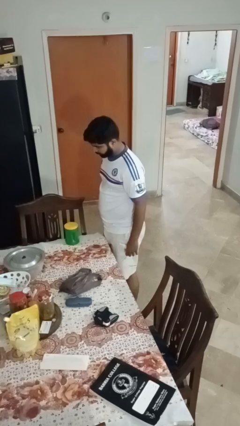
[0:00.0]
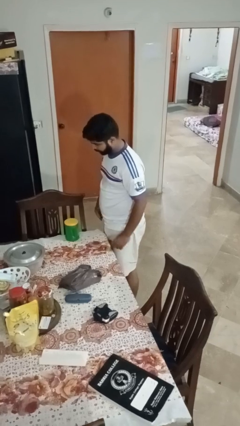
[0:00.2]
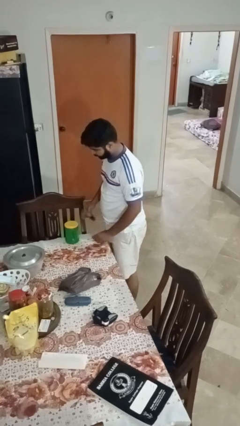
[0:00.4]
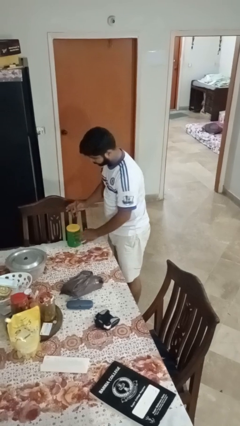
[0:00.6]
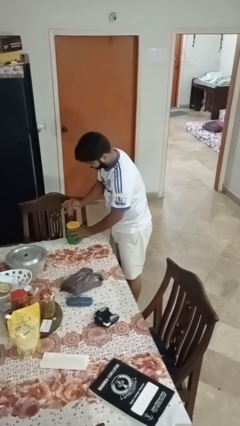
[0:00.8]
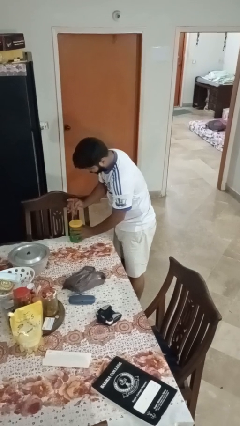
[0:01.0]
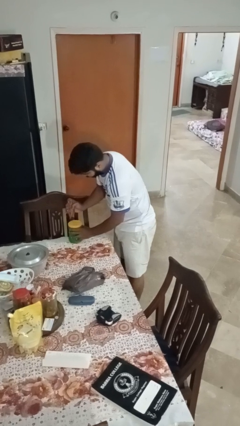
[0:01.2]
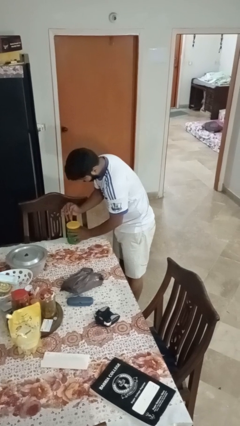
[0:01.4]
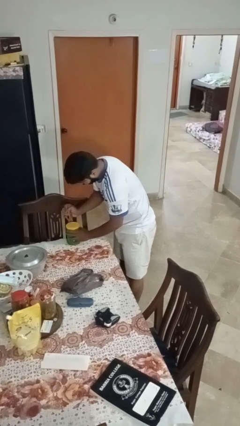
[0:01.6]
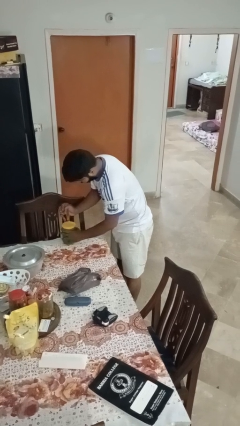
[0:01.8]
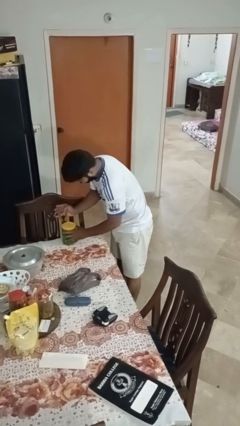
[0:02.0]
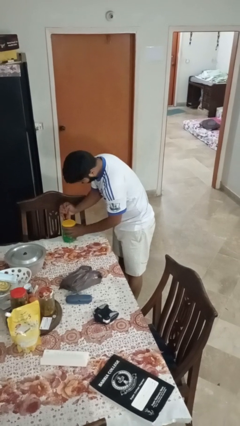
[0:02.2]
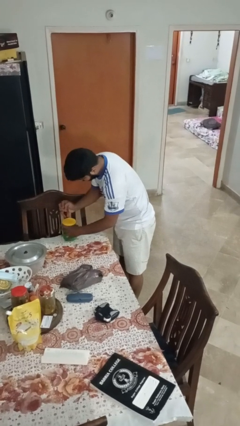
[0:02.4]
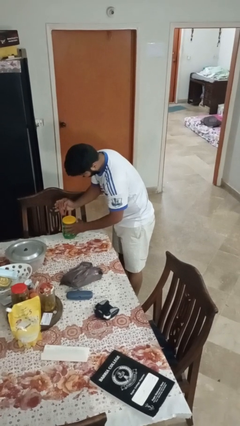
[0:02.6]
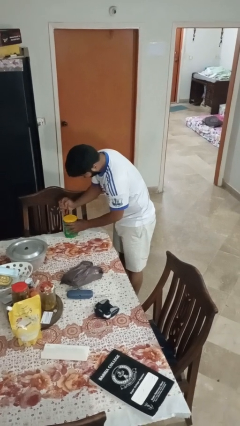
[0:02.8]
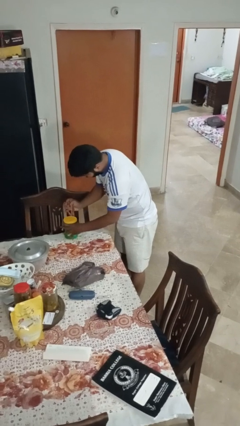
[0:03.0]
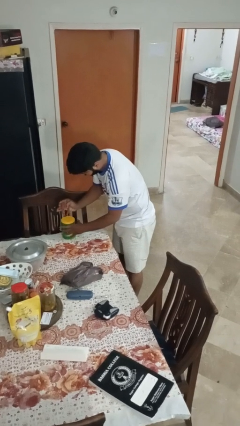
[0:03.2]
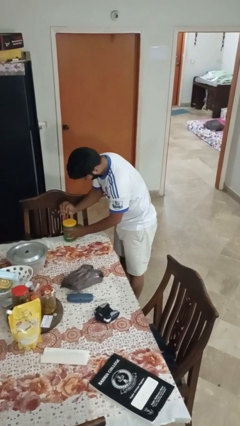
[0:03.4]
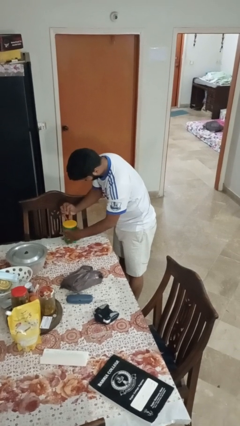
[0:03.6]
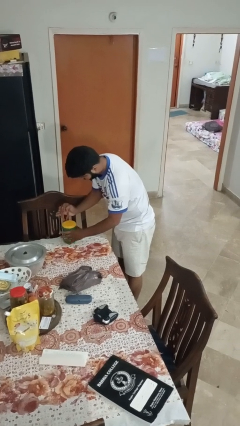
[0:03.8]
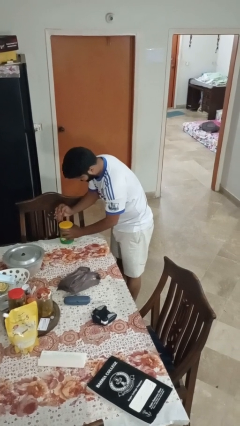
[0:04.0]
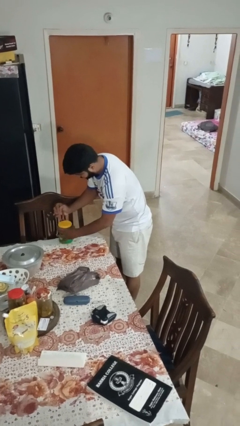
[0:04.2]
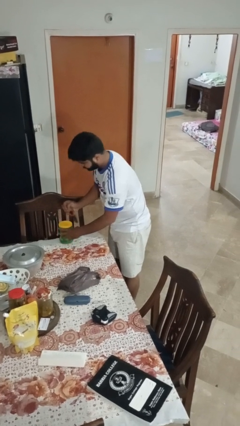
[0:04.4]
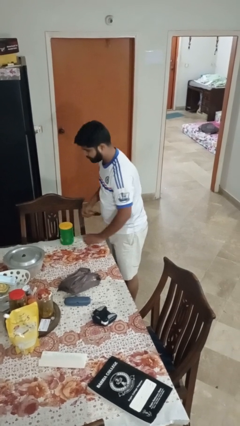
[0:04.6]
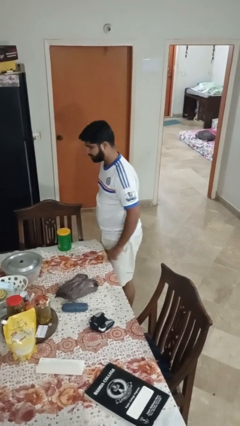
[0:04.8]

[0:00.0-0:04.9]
person opens can with can opener

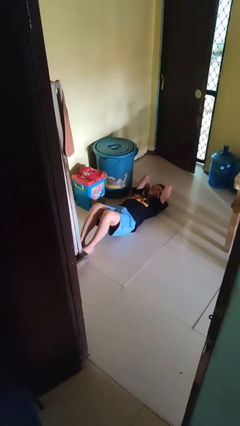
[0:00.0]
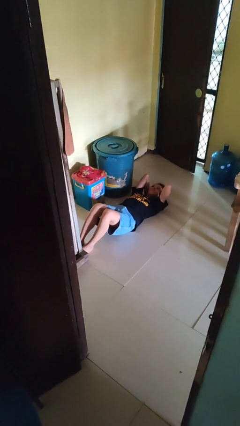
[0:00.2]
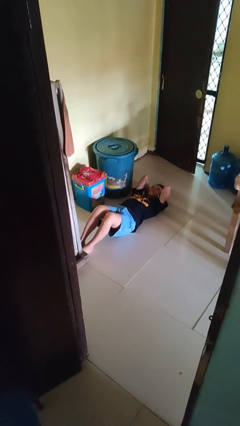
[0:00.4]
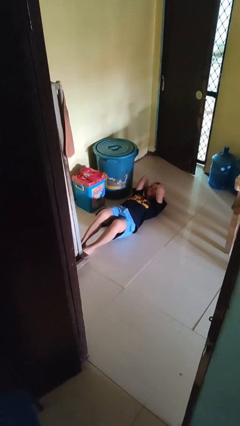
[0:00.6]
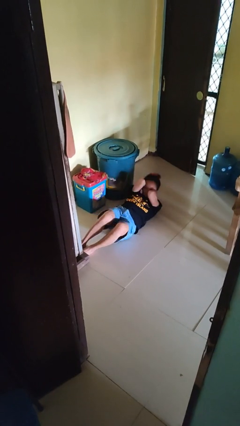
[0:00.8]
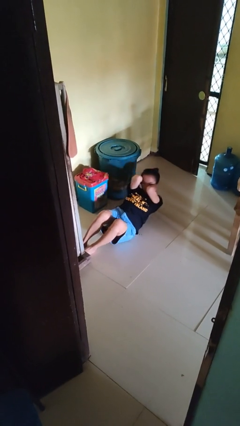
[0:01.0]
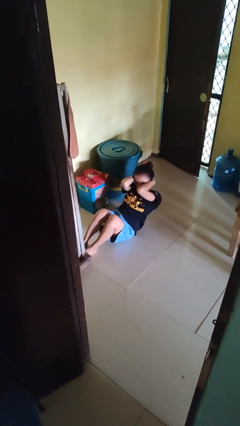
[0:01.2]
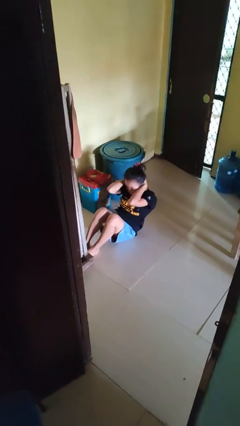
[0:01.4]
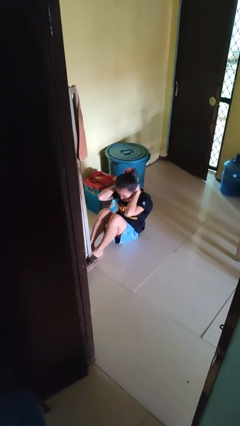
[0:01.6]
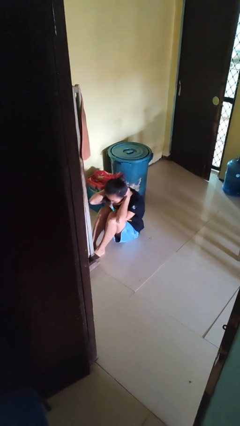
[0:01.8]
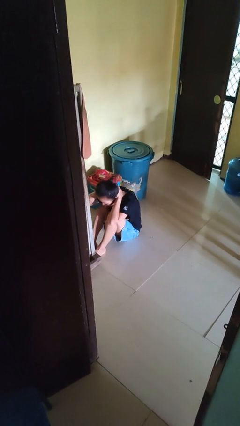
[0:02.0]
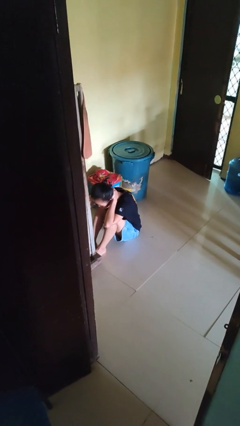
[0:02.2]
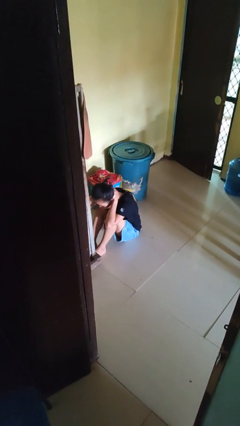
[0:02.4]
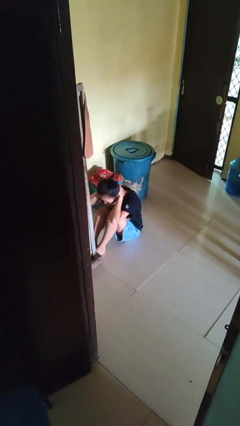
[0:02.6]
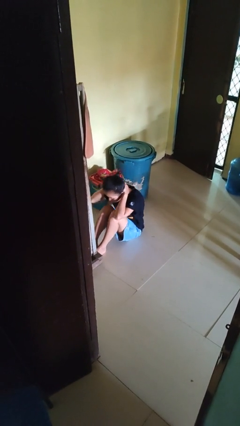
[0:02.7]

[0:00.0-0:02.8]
person exercises with situp

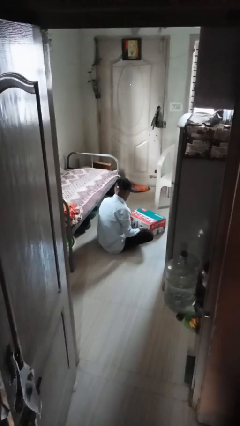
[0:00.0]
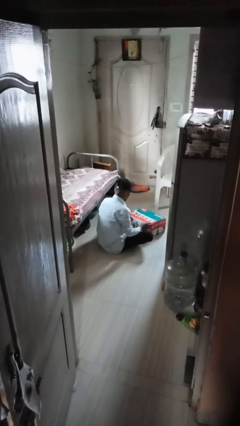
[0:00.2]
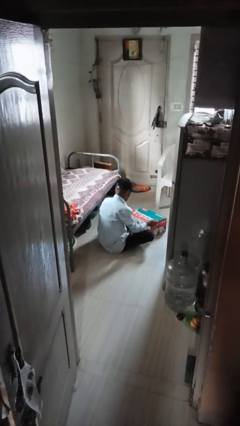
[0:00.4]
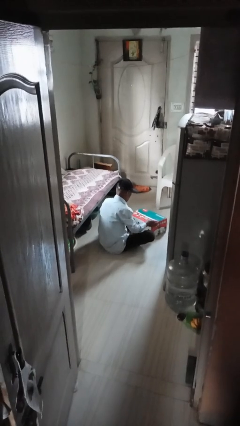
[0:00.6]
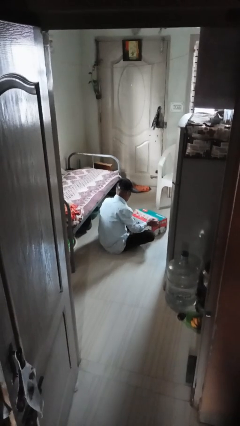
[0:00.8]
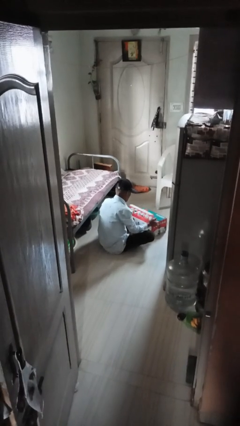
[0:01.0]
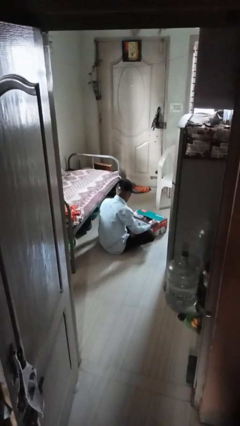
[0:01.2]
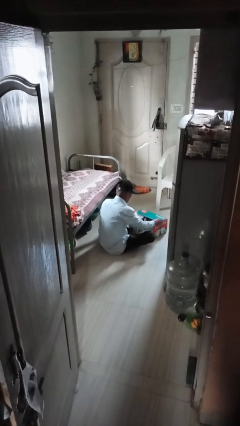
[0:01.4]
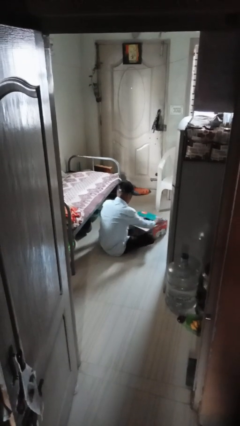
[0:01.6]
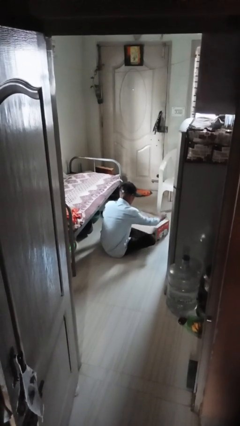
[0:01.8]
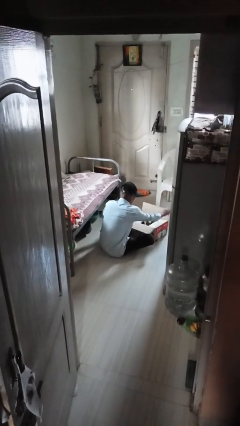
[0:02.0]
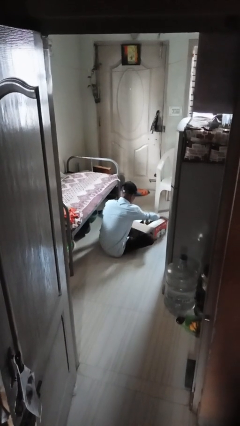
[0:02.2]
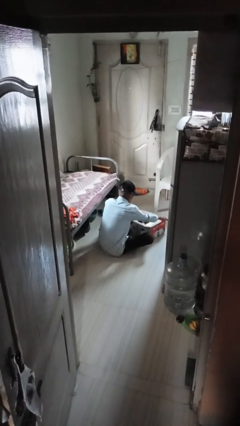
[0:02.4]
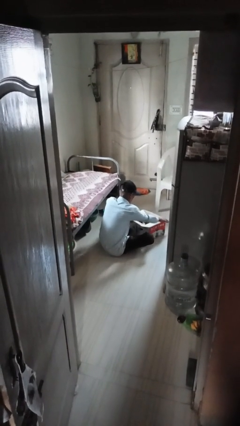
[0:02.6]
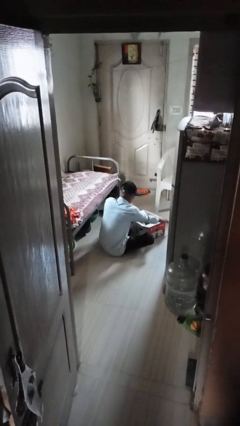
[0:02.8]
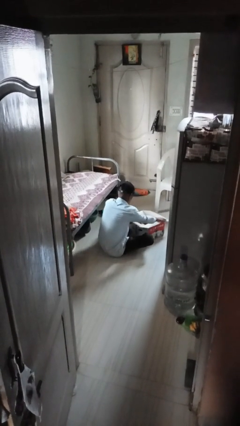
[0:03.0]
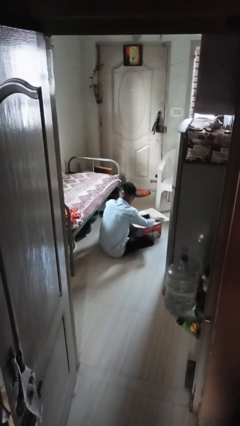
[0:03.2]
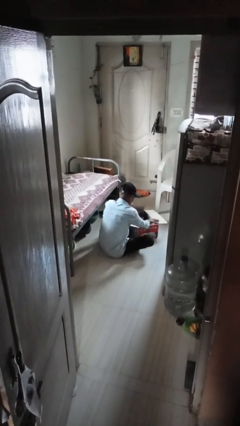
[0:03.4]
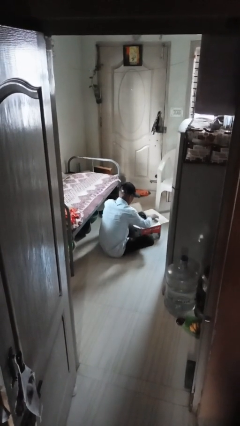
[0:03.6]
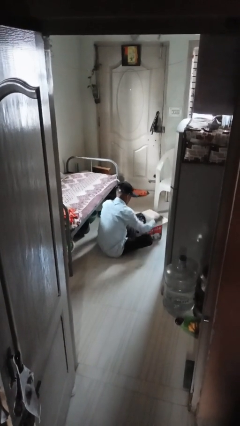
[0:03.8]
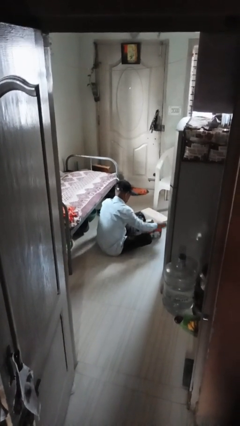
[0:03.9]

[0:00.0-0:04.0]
person opens box

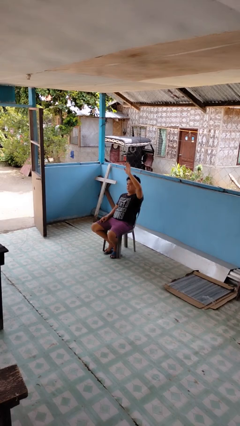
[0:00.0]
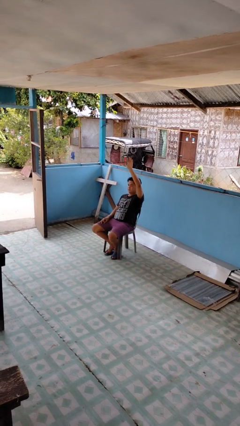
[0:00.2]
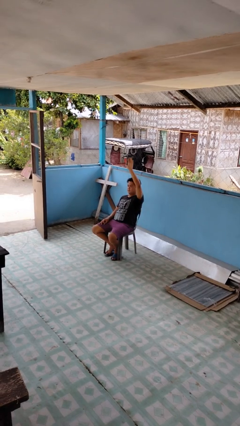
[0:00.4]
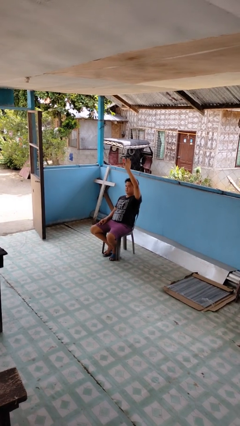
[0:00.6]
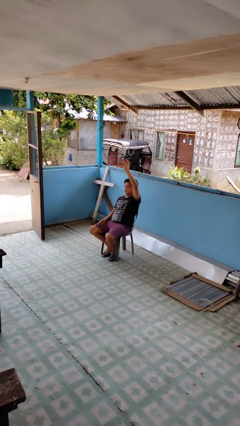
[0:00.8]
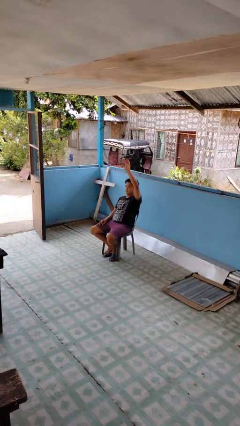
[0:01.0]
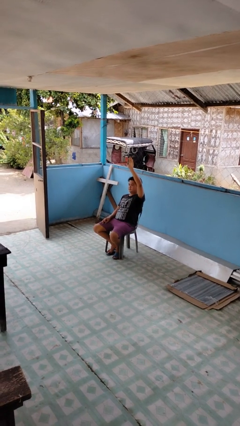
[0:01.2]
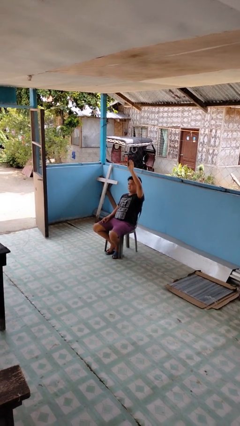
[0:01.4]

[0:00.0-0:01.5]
person gestures raise hand

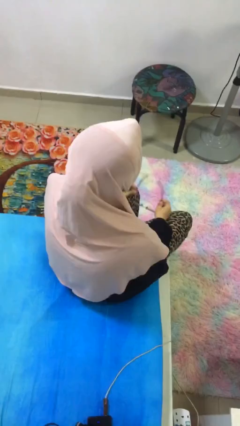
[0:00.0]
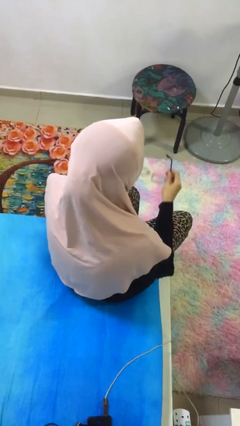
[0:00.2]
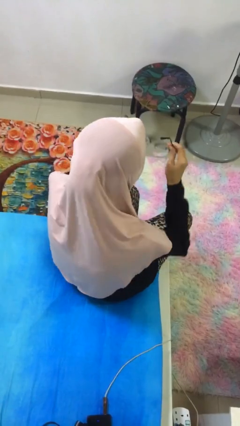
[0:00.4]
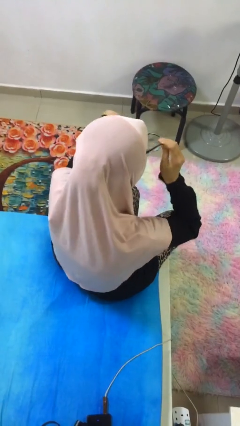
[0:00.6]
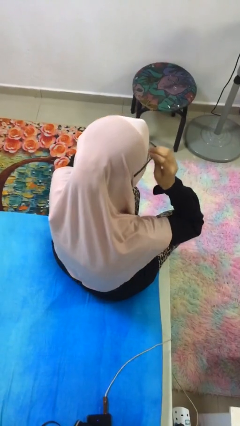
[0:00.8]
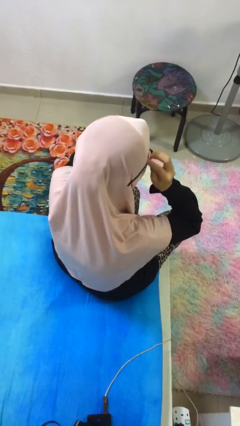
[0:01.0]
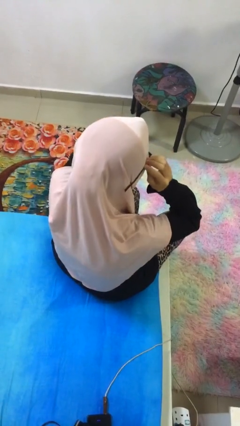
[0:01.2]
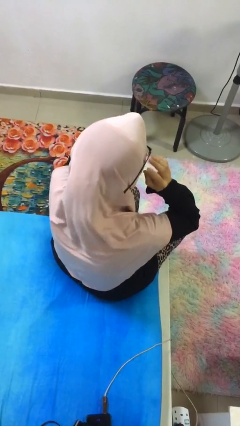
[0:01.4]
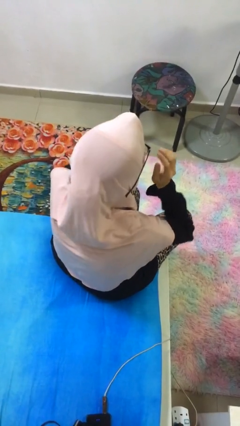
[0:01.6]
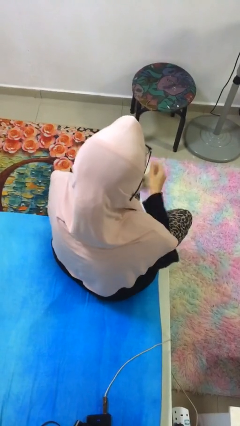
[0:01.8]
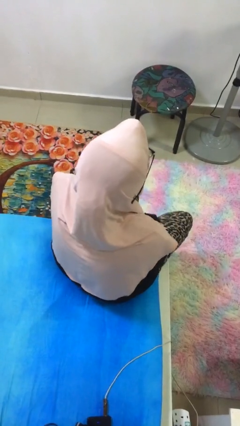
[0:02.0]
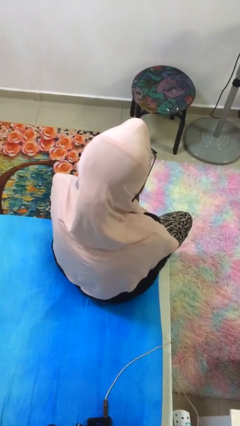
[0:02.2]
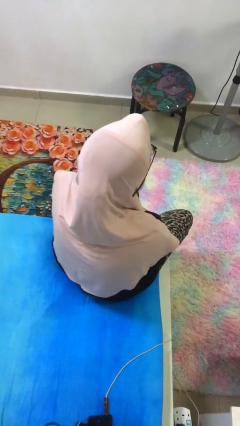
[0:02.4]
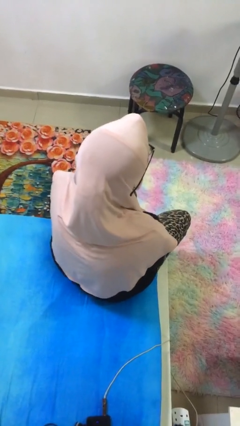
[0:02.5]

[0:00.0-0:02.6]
person puts on glasses

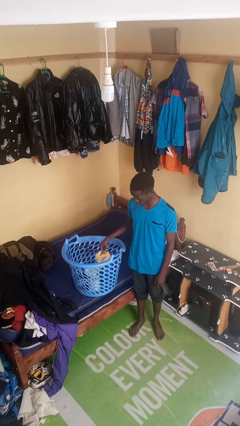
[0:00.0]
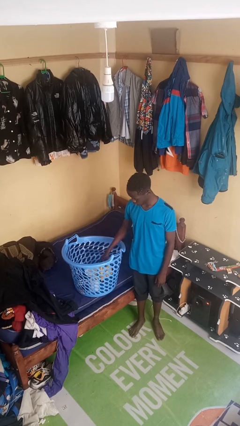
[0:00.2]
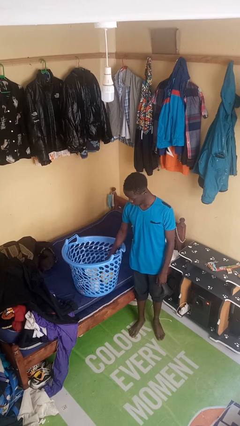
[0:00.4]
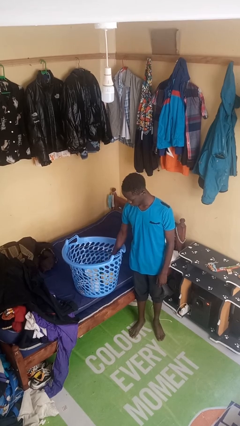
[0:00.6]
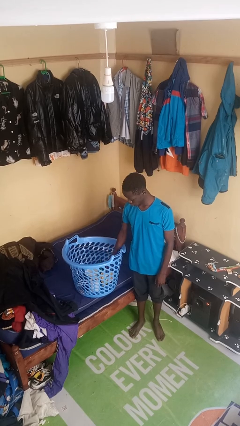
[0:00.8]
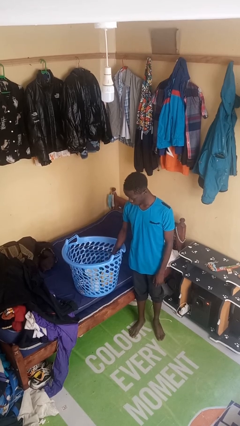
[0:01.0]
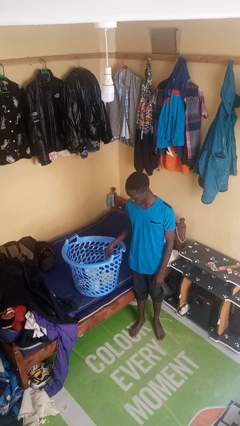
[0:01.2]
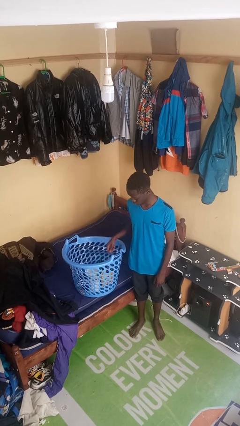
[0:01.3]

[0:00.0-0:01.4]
person puts object into basket

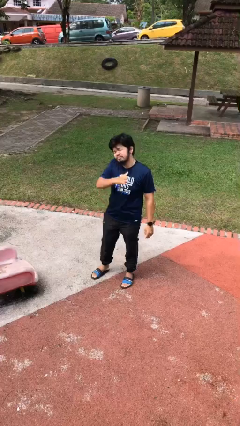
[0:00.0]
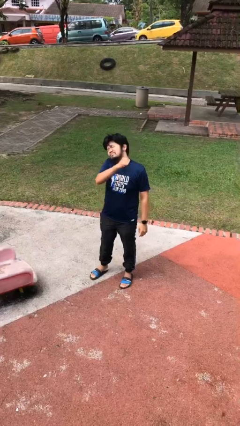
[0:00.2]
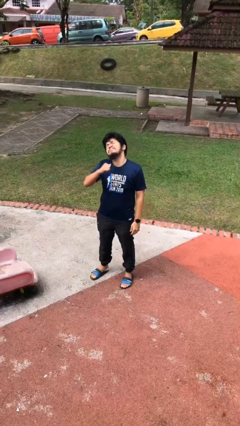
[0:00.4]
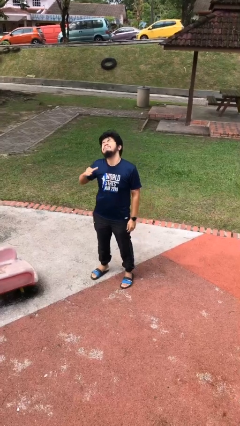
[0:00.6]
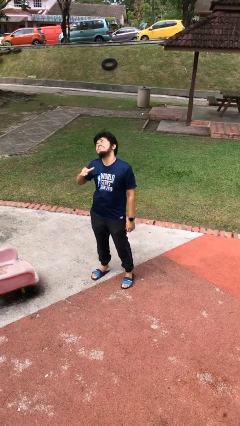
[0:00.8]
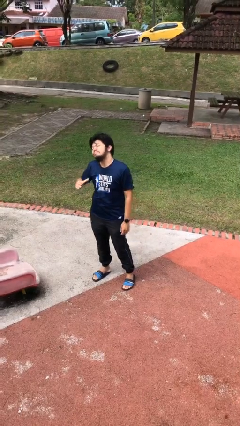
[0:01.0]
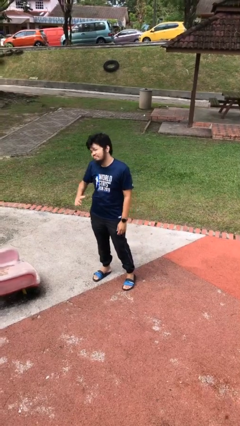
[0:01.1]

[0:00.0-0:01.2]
person gestures cut
